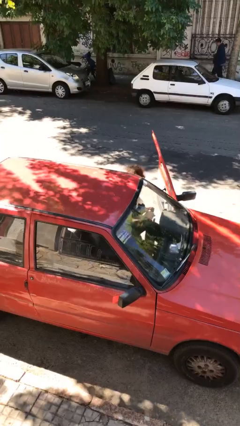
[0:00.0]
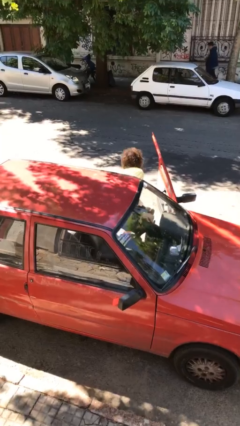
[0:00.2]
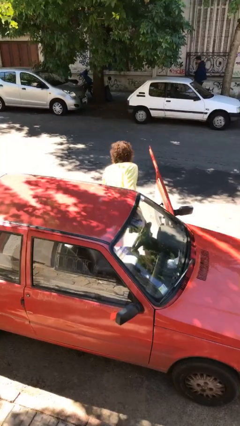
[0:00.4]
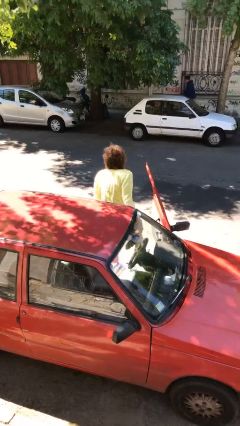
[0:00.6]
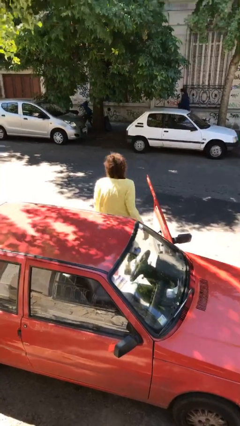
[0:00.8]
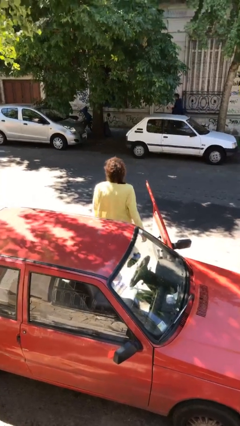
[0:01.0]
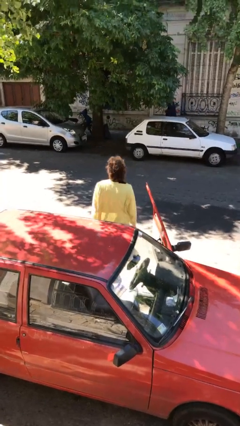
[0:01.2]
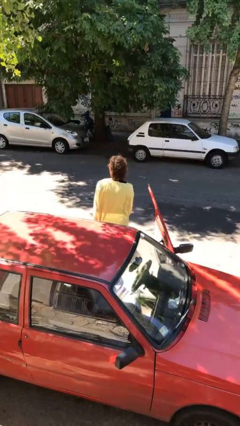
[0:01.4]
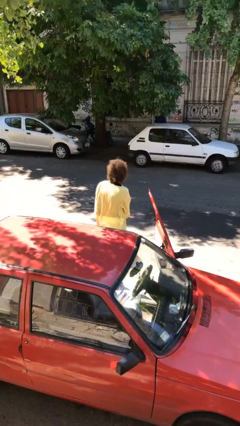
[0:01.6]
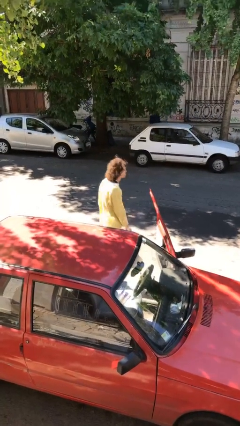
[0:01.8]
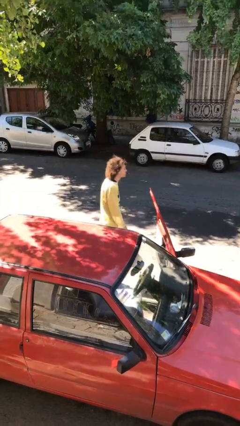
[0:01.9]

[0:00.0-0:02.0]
person exits car

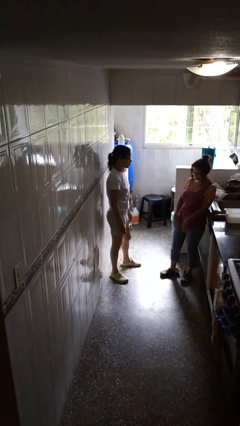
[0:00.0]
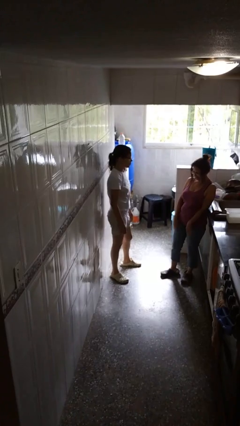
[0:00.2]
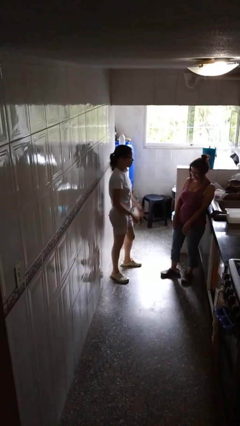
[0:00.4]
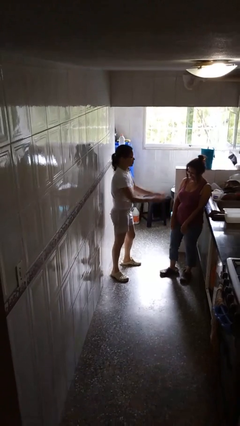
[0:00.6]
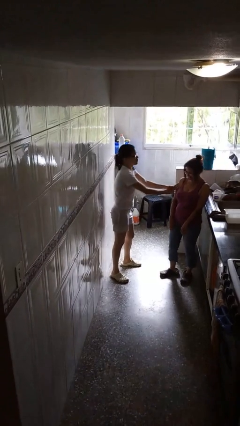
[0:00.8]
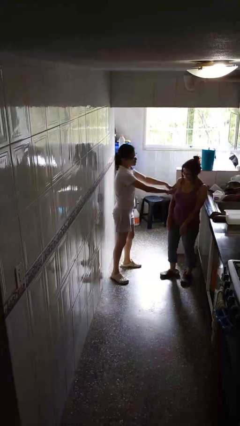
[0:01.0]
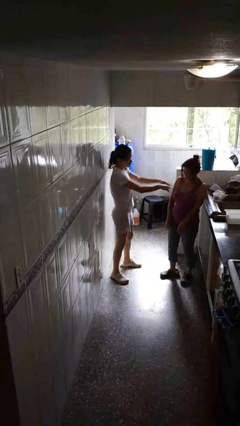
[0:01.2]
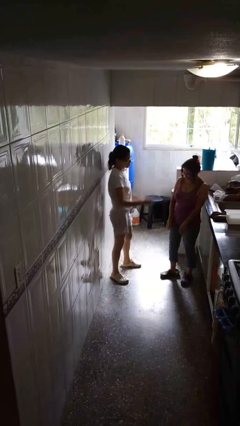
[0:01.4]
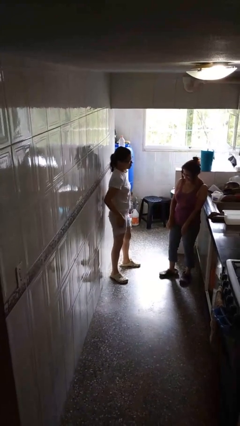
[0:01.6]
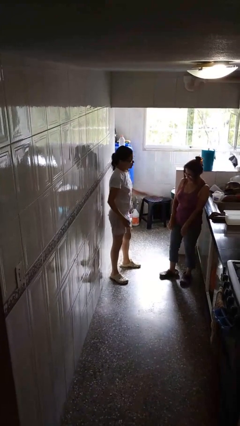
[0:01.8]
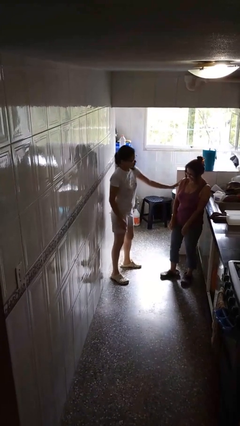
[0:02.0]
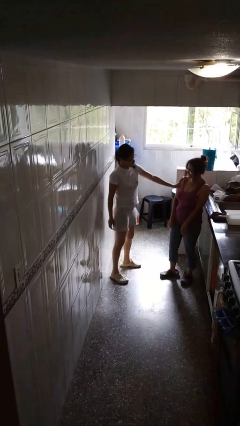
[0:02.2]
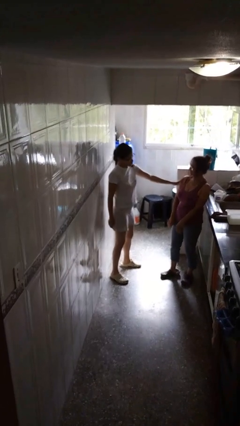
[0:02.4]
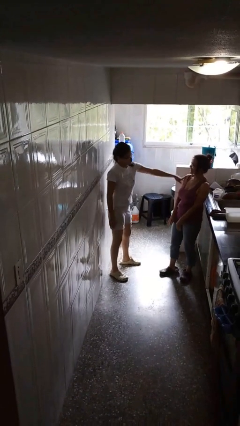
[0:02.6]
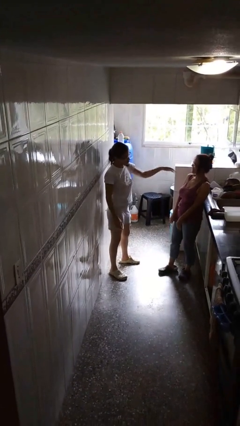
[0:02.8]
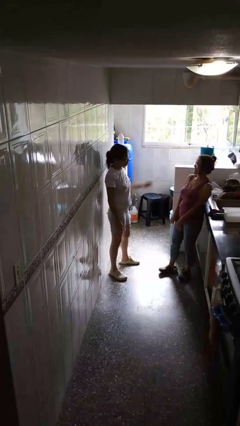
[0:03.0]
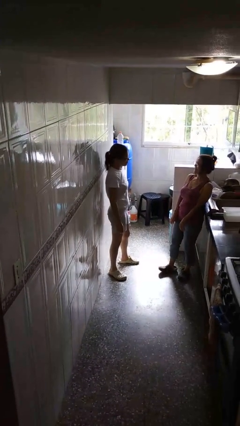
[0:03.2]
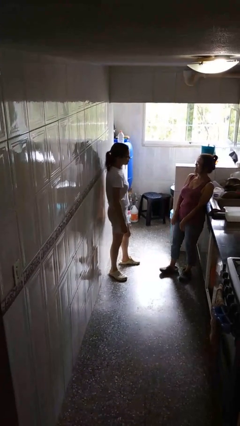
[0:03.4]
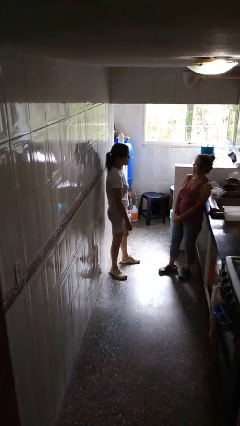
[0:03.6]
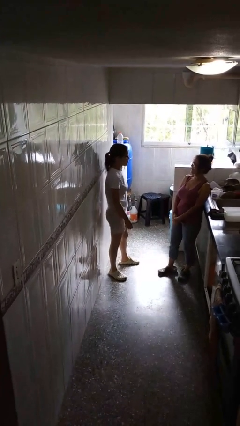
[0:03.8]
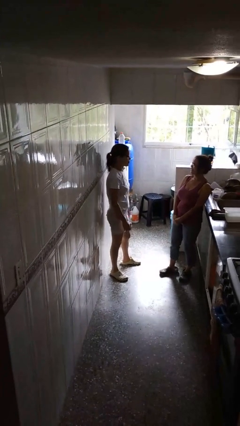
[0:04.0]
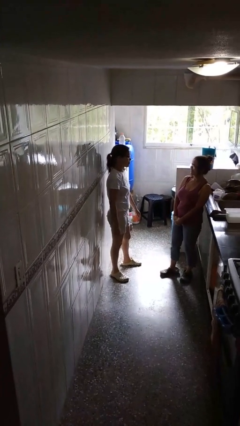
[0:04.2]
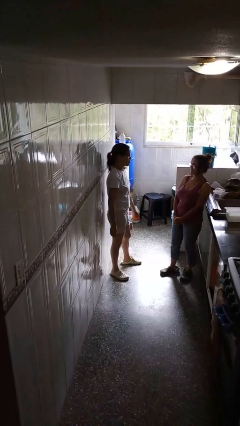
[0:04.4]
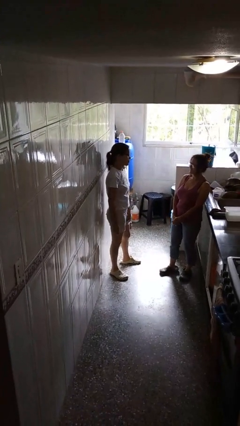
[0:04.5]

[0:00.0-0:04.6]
person shoves person

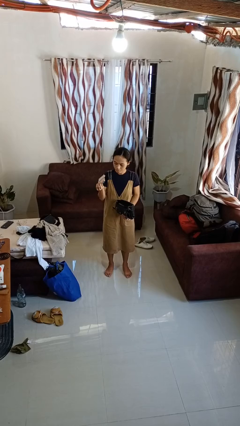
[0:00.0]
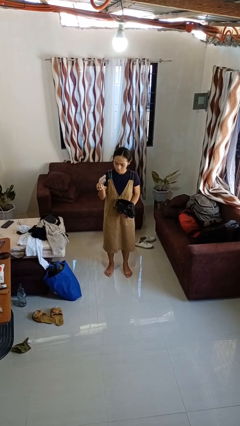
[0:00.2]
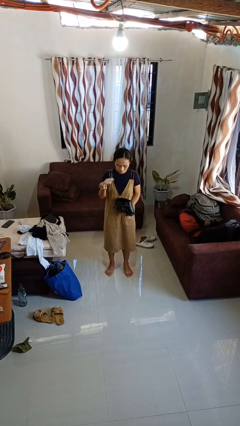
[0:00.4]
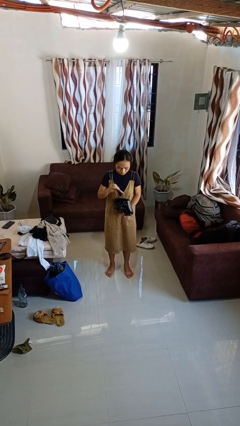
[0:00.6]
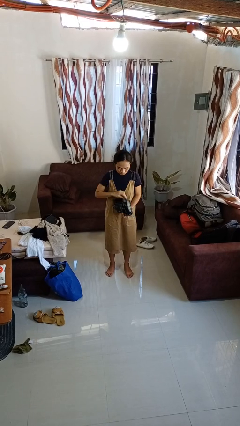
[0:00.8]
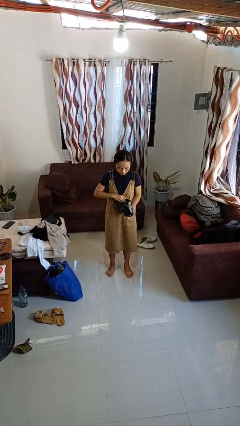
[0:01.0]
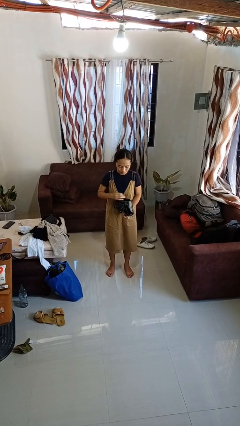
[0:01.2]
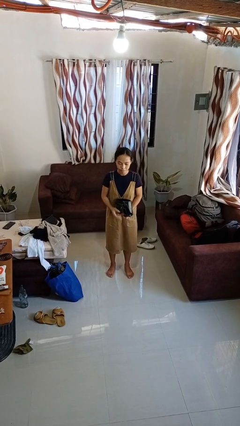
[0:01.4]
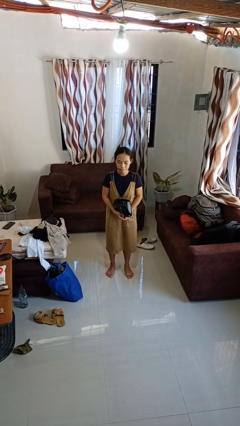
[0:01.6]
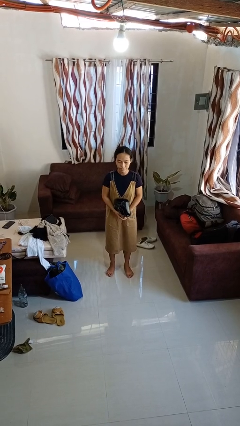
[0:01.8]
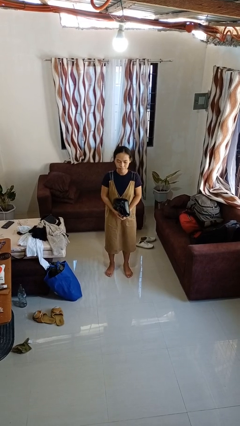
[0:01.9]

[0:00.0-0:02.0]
person puts object into purse

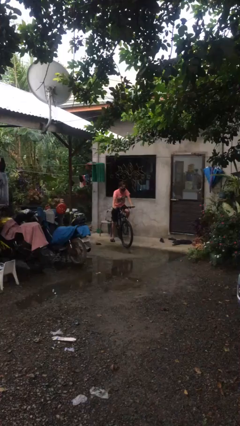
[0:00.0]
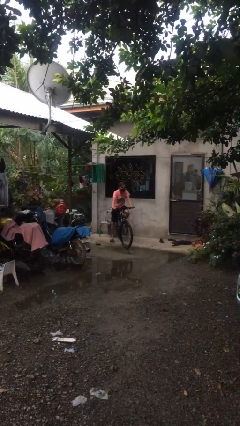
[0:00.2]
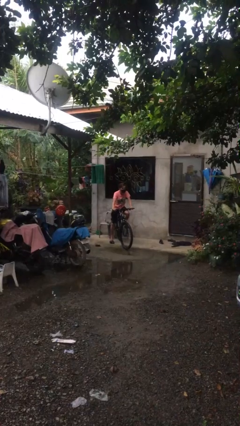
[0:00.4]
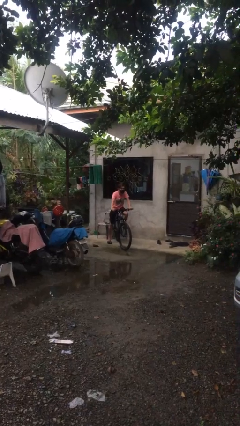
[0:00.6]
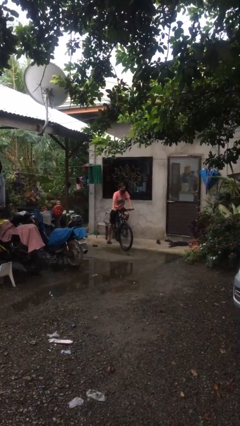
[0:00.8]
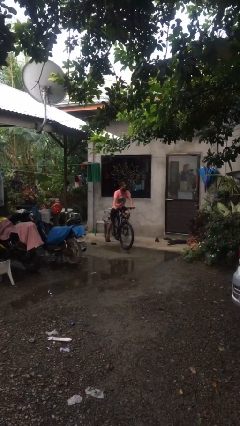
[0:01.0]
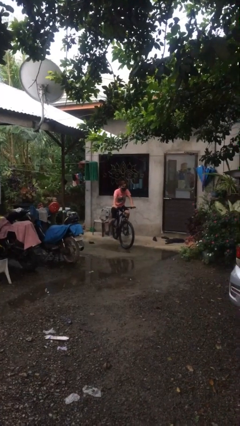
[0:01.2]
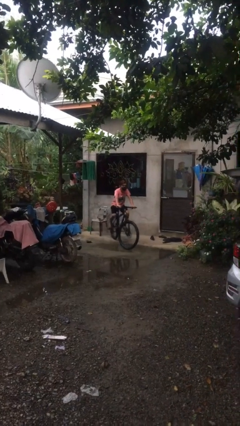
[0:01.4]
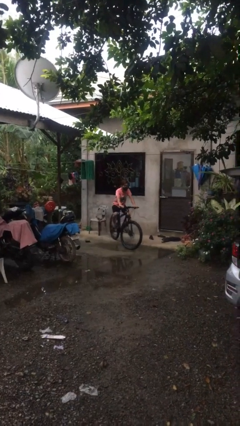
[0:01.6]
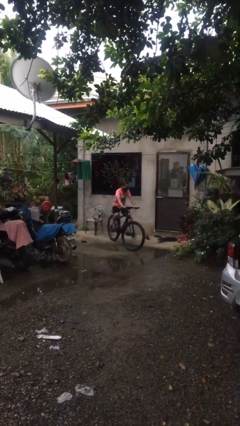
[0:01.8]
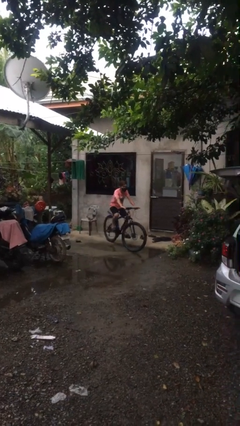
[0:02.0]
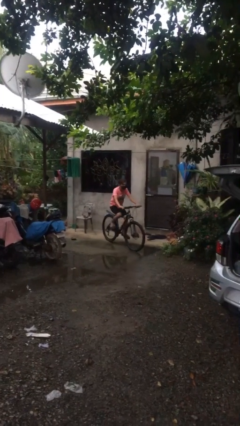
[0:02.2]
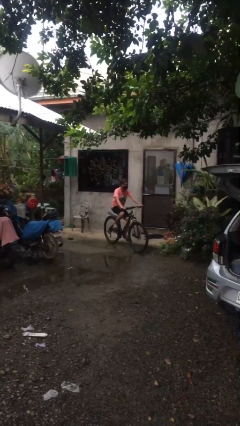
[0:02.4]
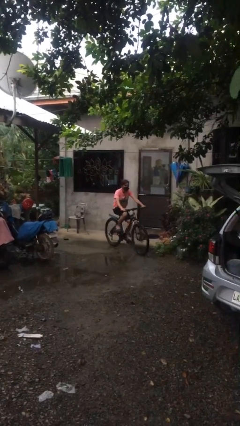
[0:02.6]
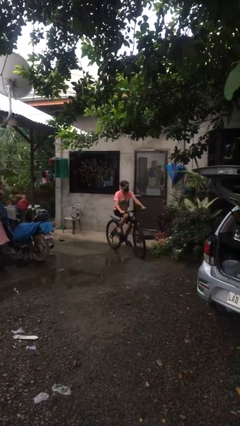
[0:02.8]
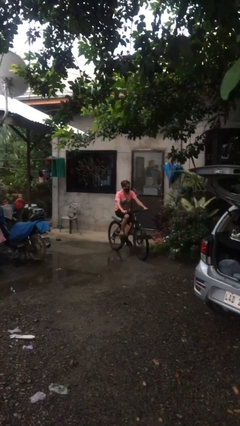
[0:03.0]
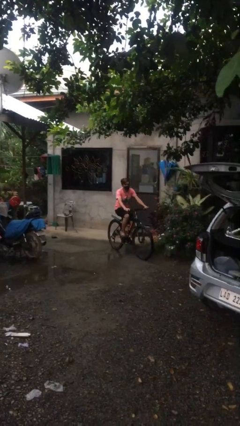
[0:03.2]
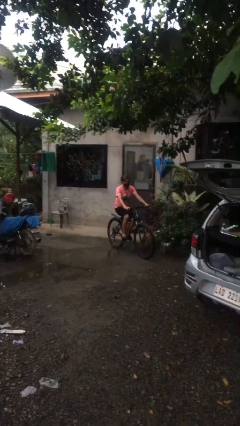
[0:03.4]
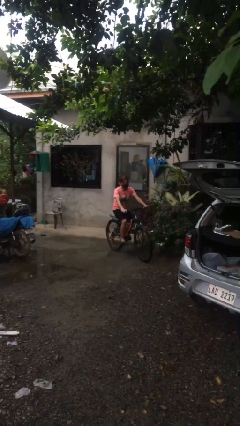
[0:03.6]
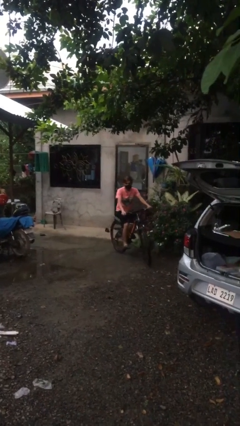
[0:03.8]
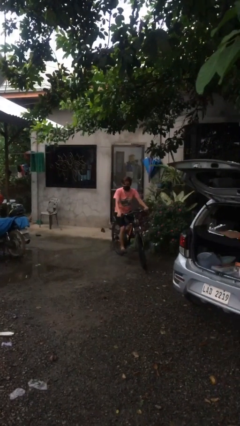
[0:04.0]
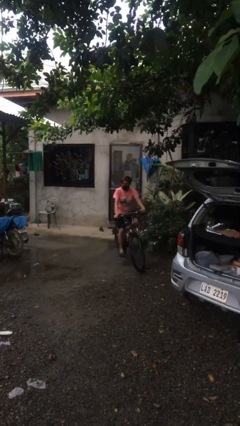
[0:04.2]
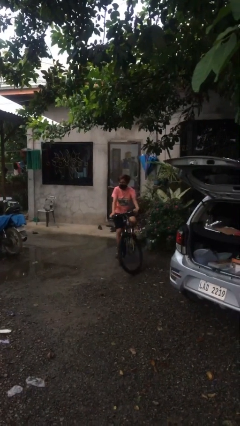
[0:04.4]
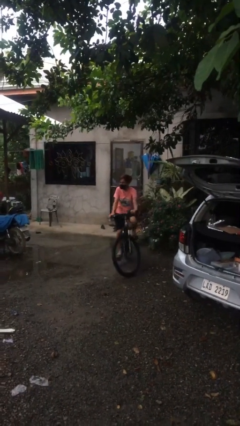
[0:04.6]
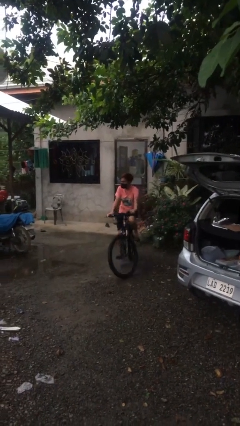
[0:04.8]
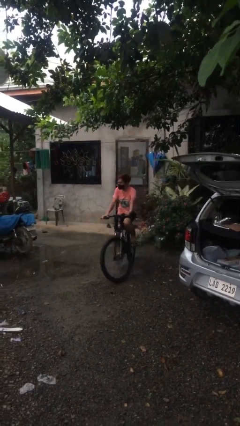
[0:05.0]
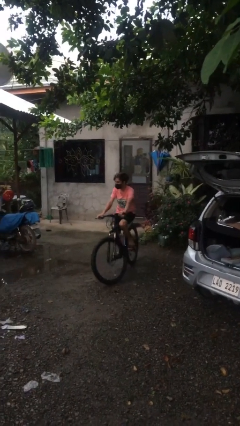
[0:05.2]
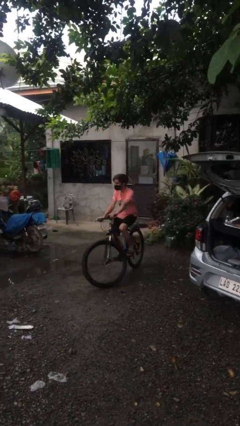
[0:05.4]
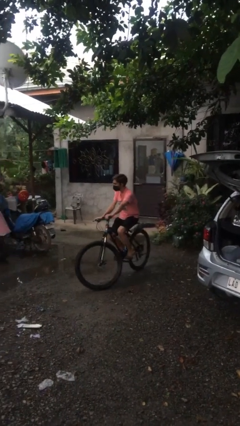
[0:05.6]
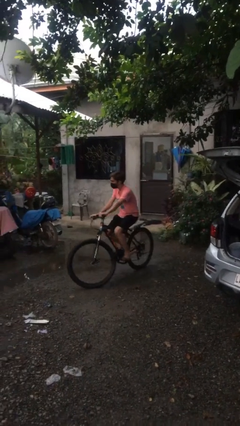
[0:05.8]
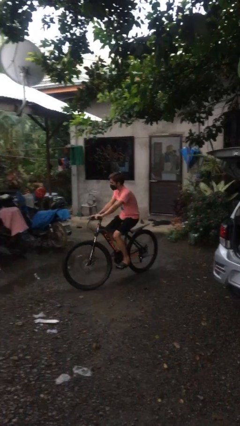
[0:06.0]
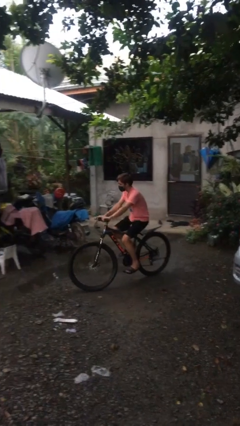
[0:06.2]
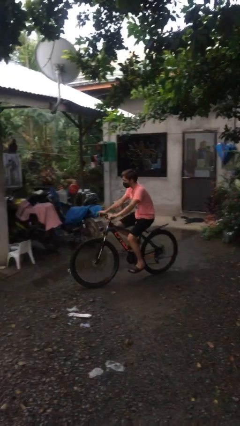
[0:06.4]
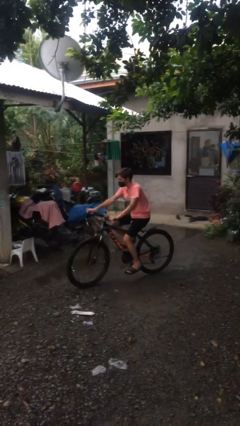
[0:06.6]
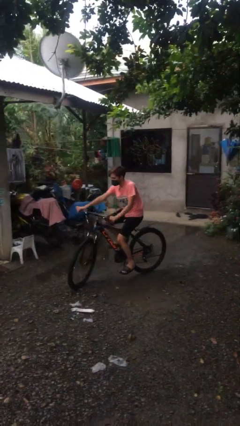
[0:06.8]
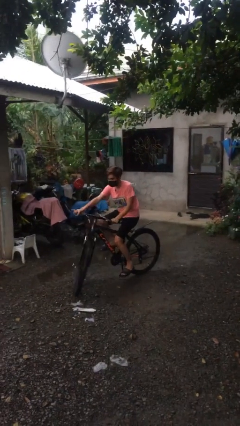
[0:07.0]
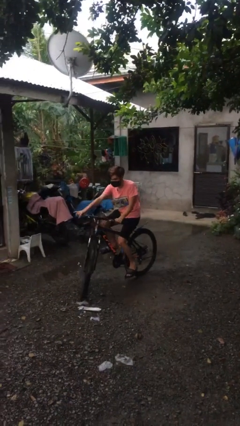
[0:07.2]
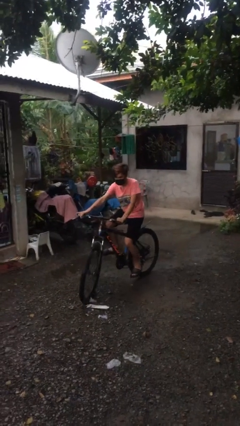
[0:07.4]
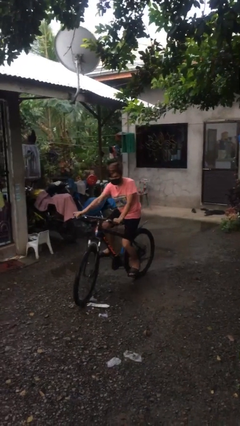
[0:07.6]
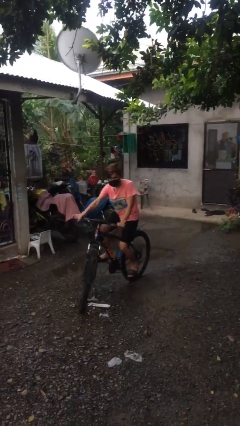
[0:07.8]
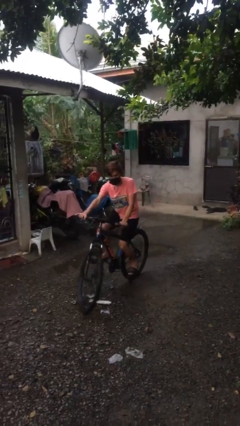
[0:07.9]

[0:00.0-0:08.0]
person rides bicycle

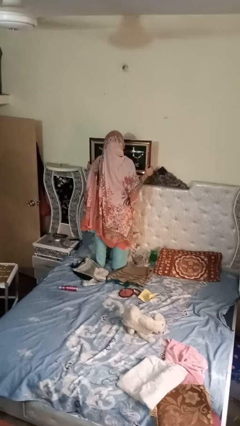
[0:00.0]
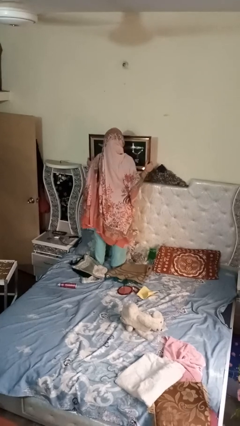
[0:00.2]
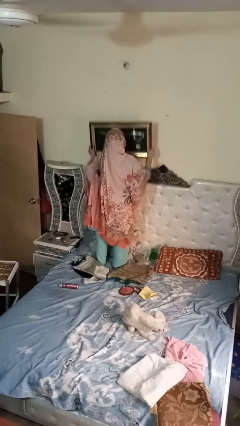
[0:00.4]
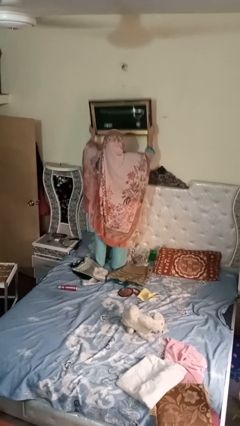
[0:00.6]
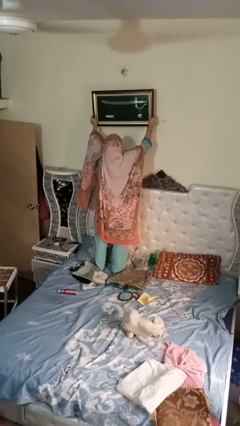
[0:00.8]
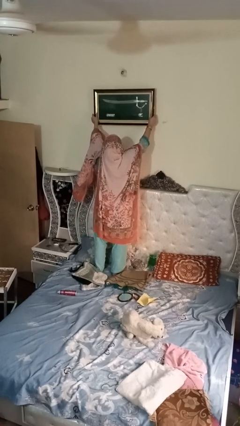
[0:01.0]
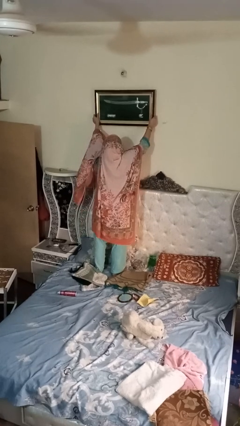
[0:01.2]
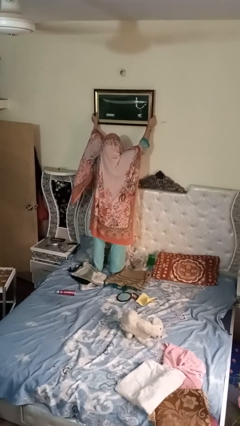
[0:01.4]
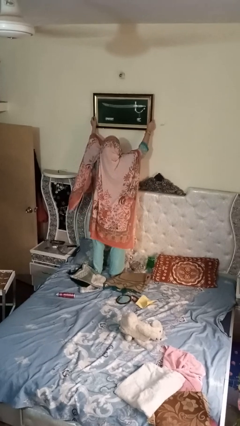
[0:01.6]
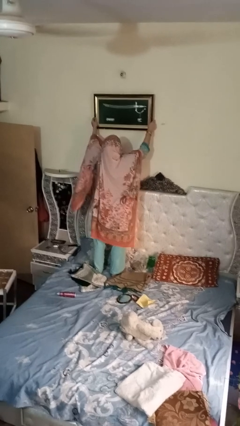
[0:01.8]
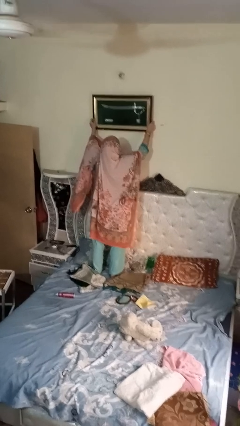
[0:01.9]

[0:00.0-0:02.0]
person takes down picture frame
